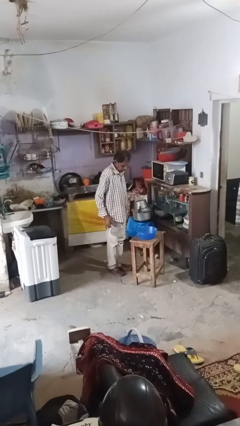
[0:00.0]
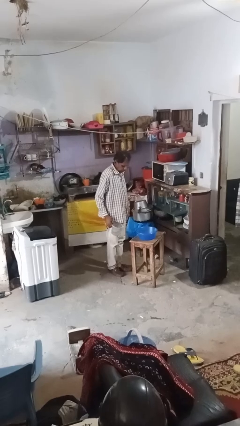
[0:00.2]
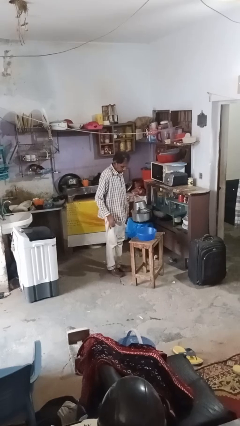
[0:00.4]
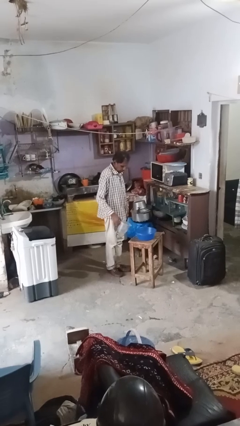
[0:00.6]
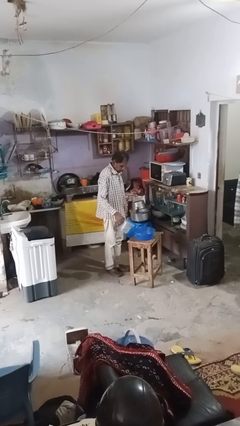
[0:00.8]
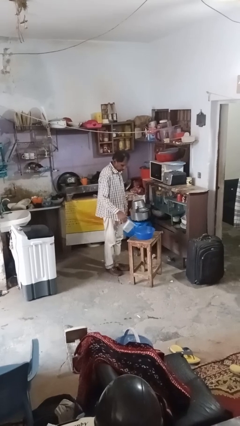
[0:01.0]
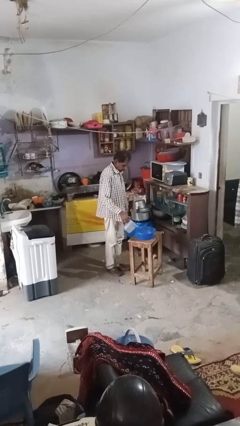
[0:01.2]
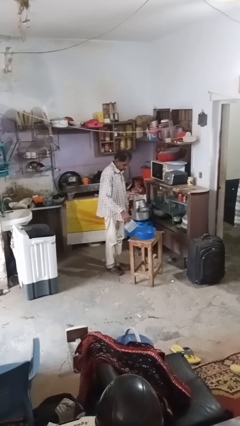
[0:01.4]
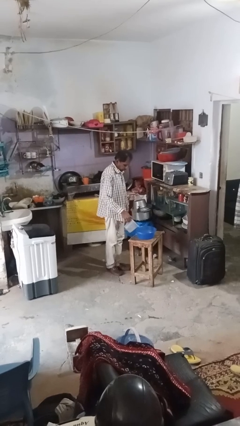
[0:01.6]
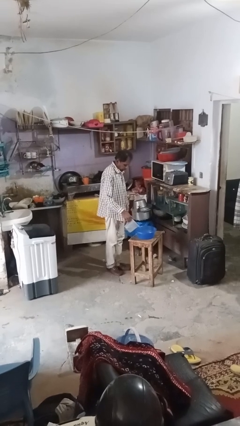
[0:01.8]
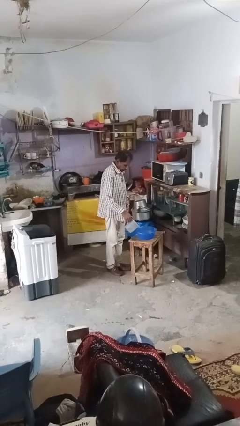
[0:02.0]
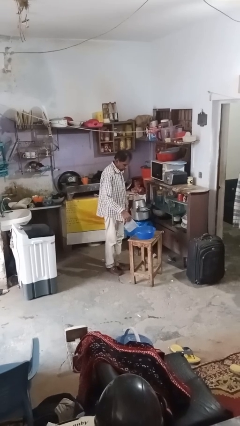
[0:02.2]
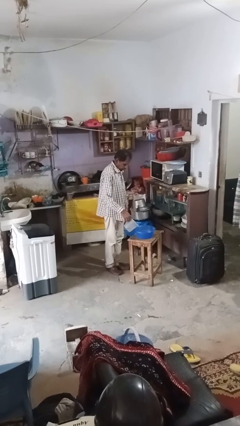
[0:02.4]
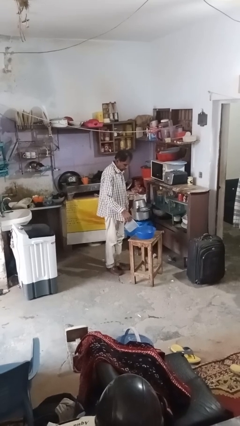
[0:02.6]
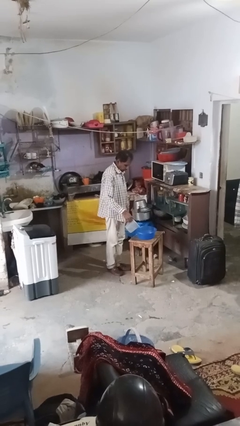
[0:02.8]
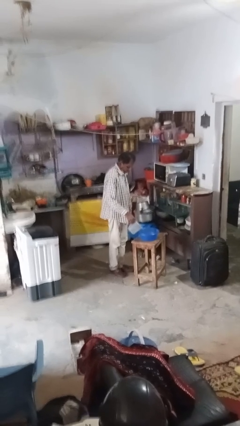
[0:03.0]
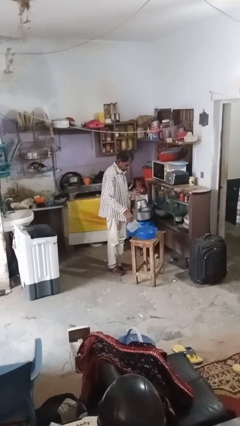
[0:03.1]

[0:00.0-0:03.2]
person pours into bowl

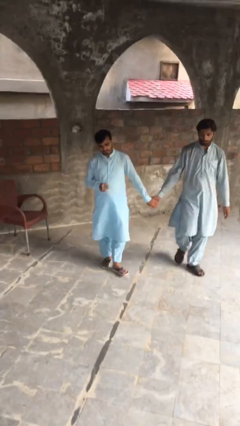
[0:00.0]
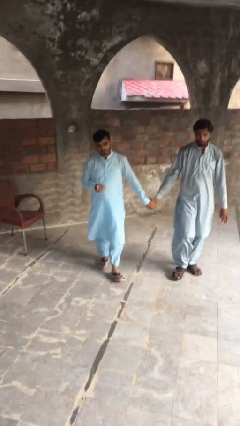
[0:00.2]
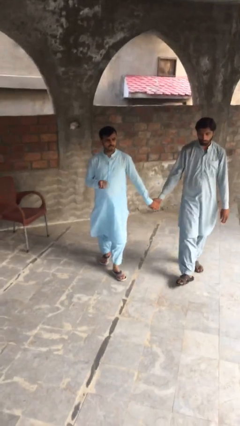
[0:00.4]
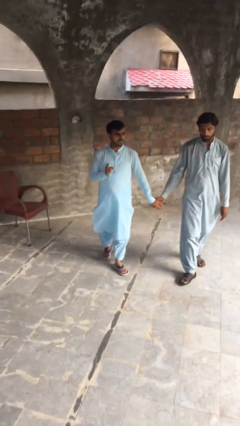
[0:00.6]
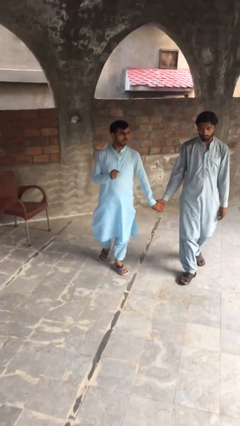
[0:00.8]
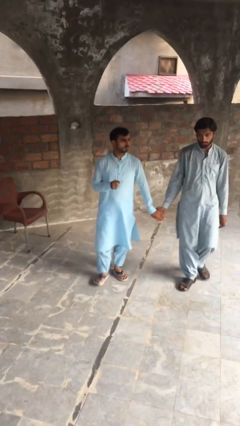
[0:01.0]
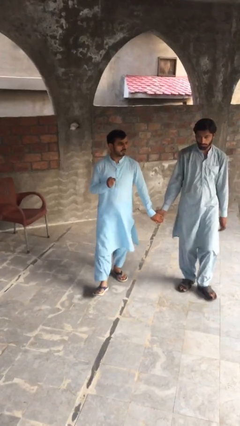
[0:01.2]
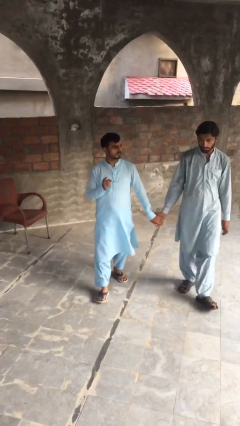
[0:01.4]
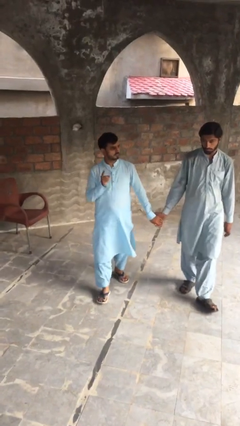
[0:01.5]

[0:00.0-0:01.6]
person holds hand

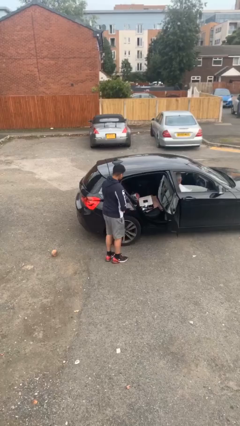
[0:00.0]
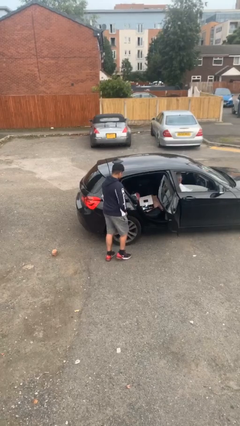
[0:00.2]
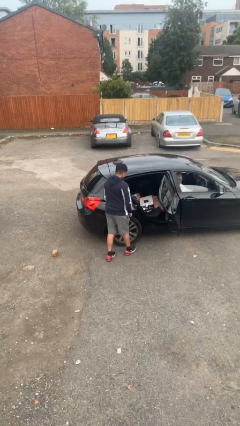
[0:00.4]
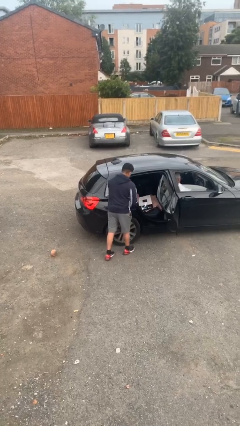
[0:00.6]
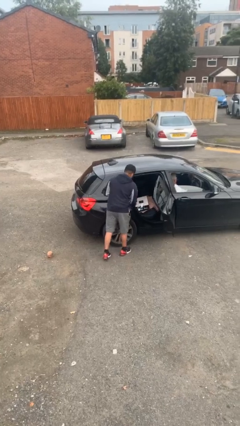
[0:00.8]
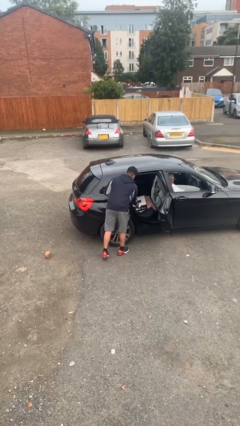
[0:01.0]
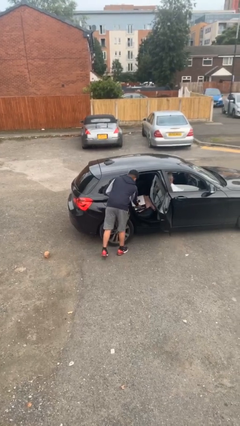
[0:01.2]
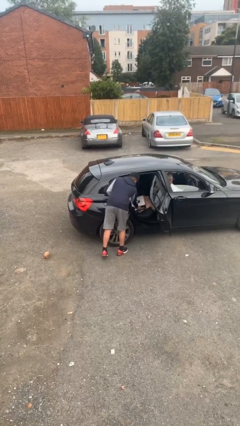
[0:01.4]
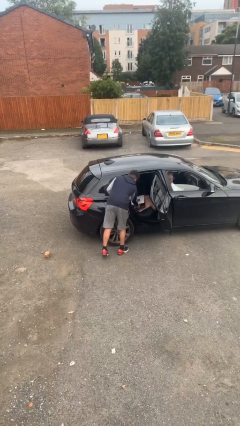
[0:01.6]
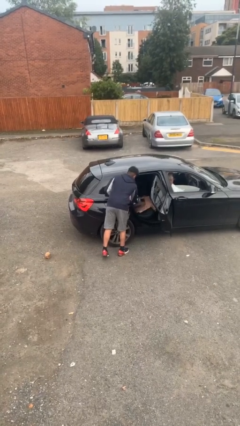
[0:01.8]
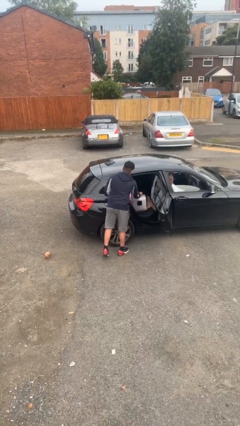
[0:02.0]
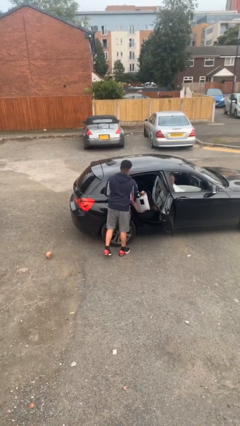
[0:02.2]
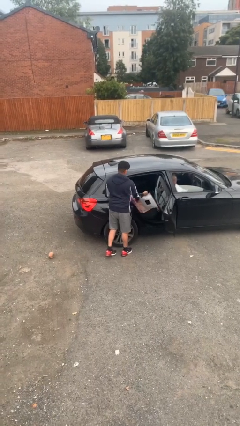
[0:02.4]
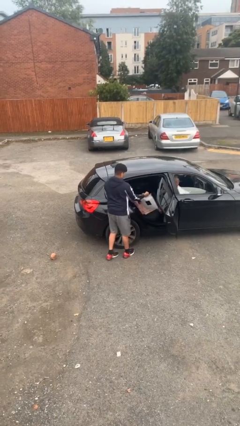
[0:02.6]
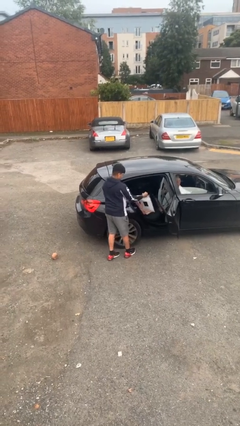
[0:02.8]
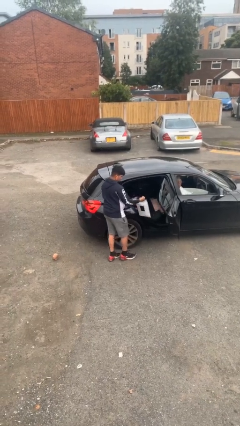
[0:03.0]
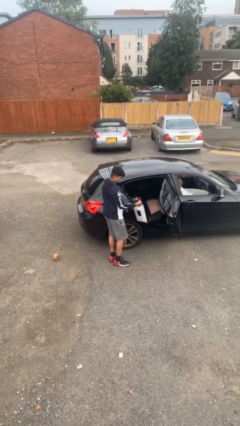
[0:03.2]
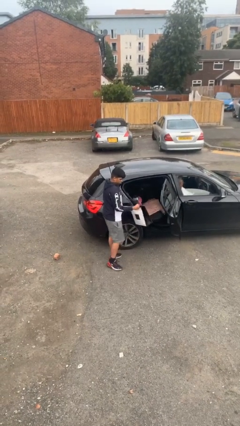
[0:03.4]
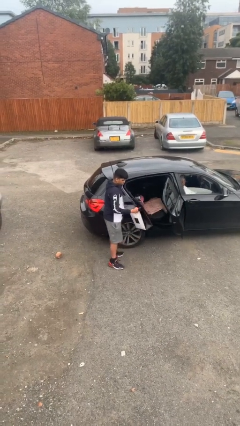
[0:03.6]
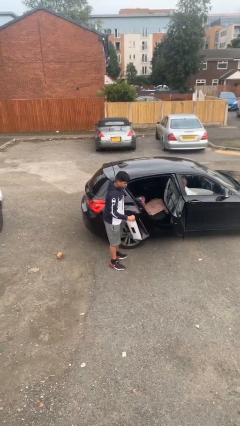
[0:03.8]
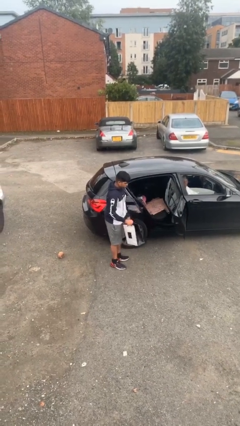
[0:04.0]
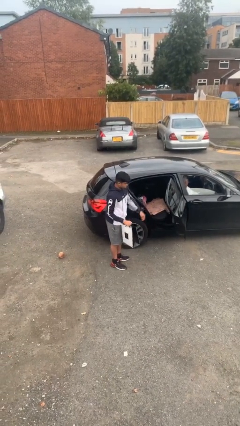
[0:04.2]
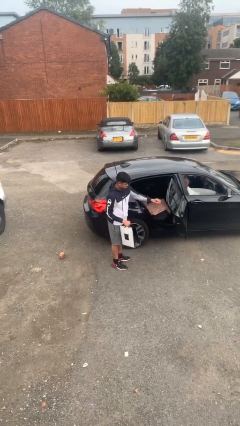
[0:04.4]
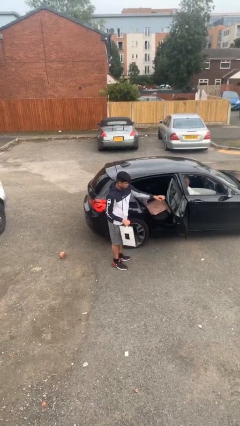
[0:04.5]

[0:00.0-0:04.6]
person unloads car

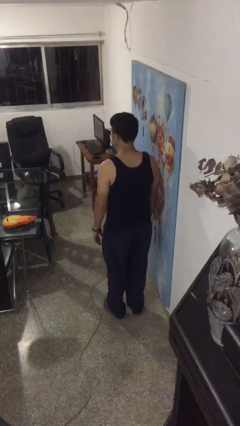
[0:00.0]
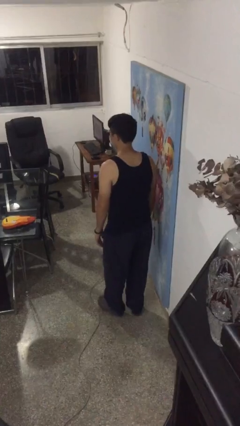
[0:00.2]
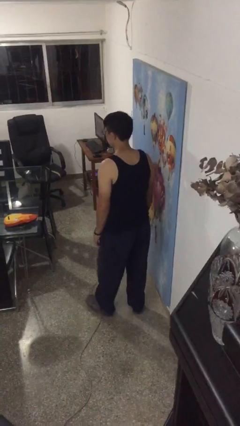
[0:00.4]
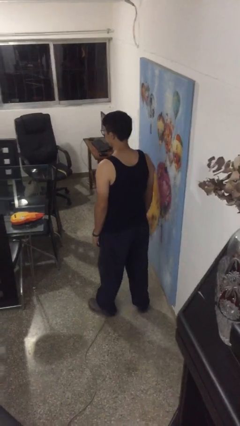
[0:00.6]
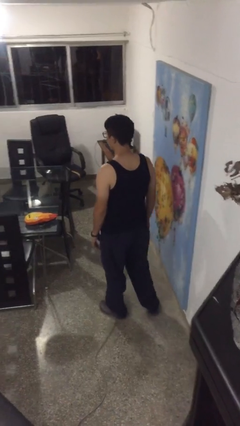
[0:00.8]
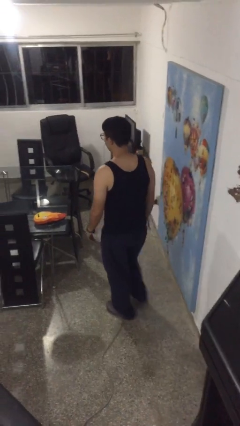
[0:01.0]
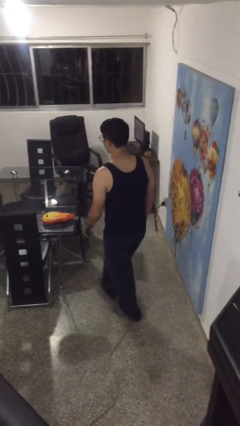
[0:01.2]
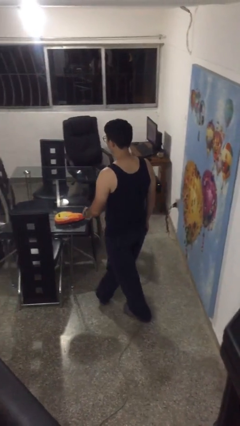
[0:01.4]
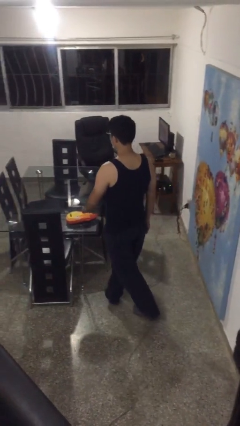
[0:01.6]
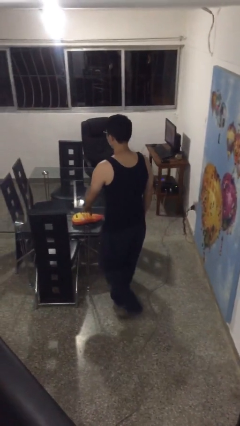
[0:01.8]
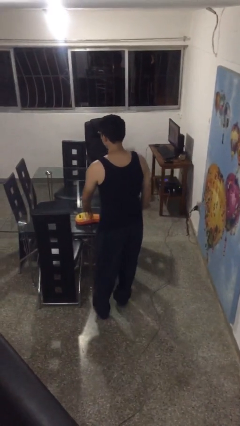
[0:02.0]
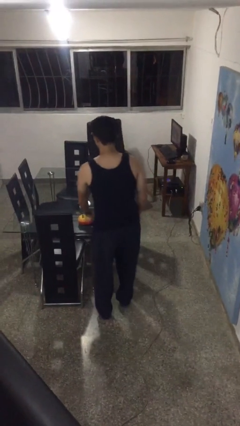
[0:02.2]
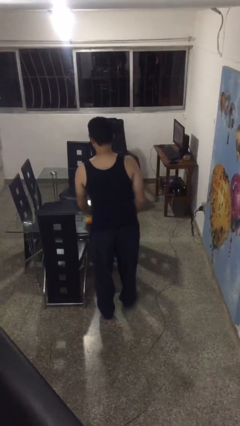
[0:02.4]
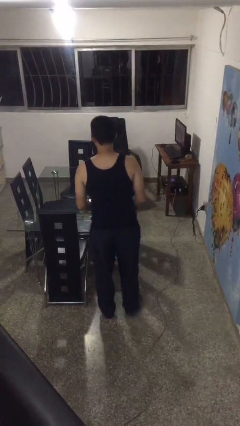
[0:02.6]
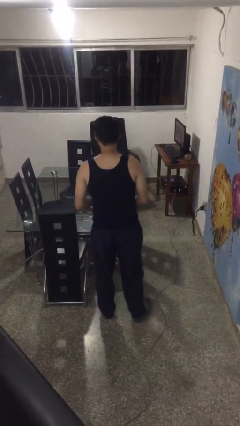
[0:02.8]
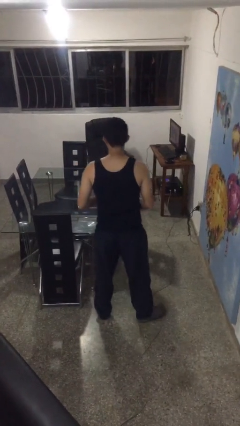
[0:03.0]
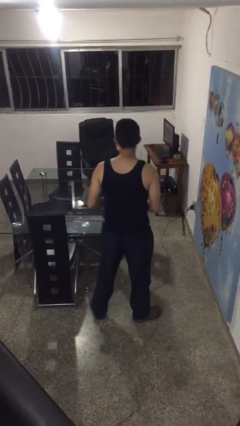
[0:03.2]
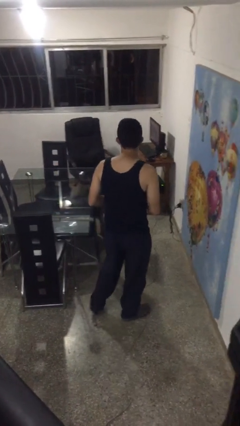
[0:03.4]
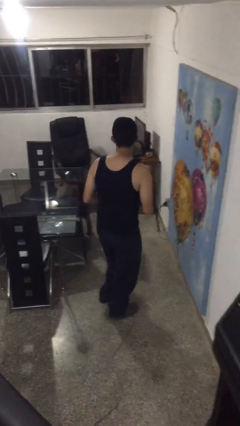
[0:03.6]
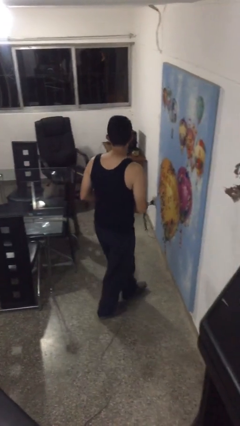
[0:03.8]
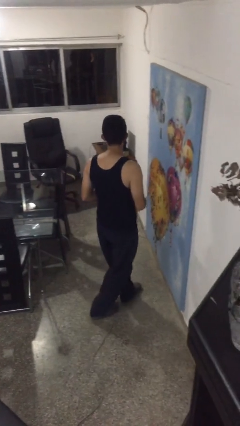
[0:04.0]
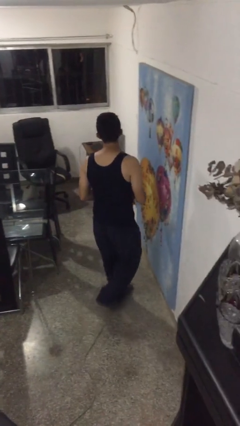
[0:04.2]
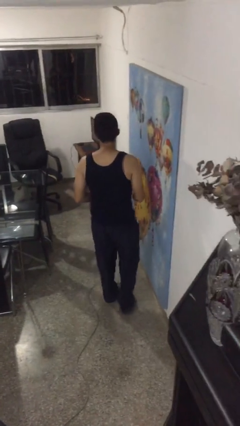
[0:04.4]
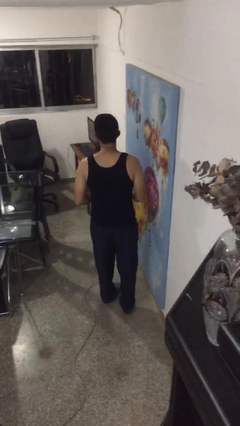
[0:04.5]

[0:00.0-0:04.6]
person picks up object from table

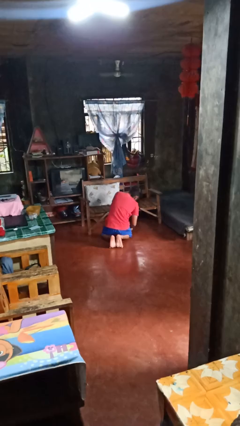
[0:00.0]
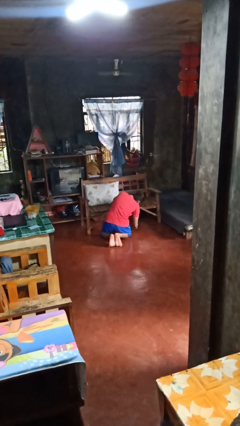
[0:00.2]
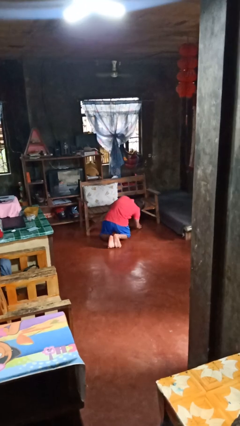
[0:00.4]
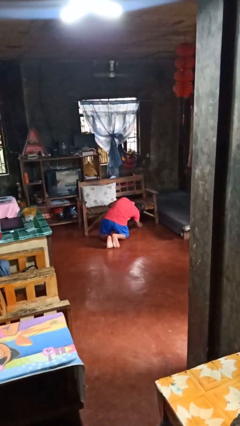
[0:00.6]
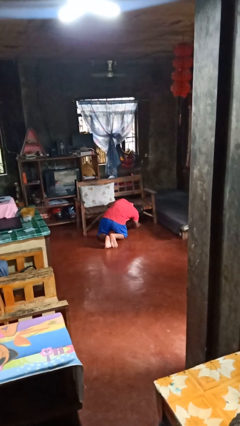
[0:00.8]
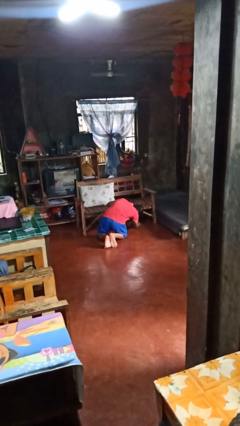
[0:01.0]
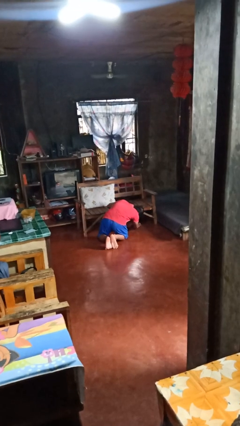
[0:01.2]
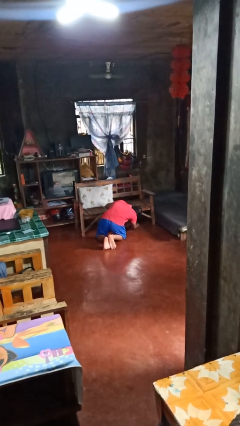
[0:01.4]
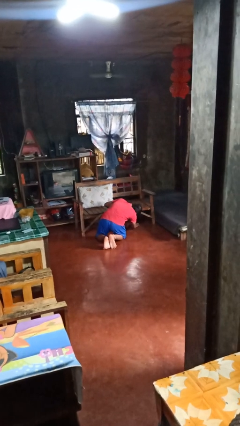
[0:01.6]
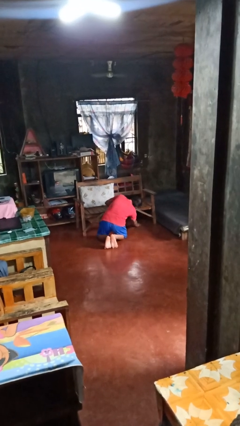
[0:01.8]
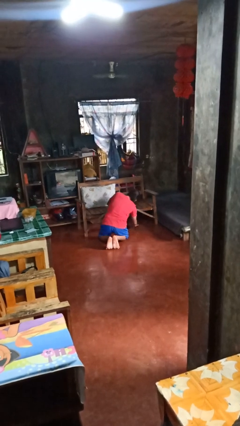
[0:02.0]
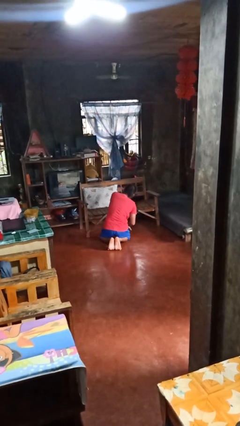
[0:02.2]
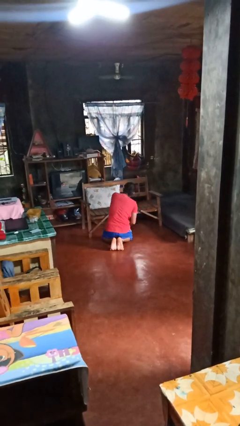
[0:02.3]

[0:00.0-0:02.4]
person searches under couch

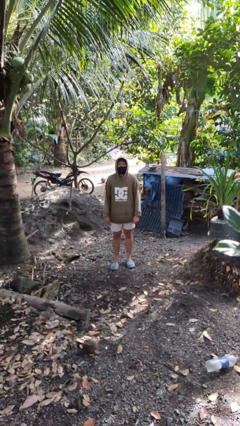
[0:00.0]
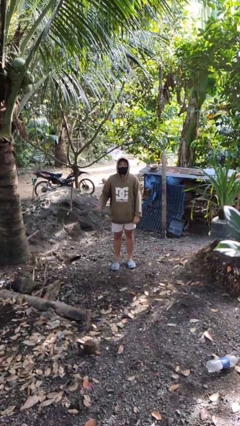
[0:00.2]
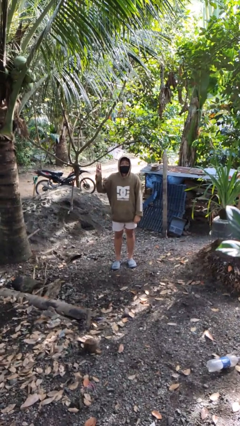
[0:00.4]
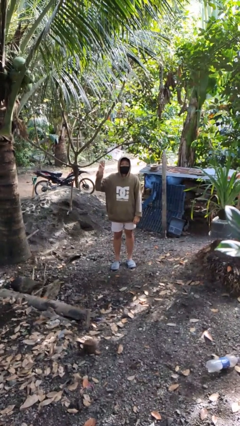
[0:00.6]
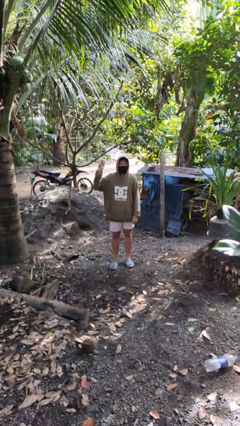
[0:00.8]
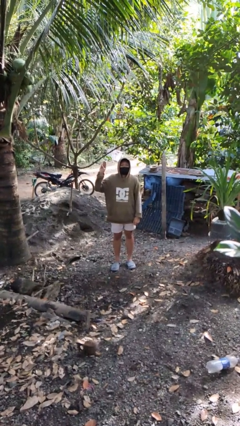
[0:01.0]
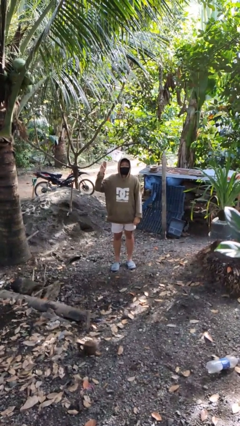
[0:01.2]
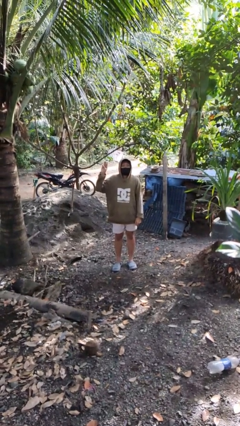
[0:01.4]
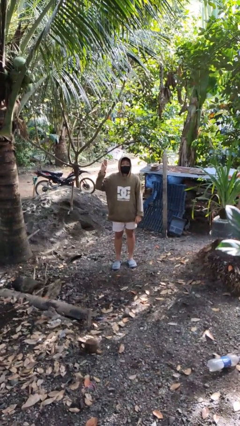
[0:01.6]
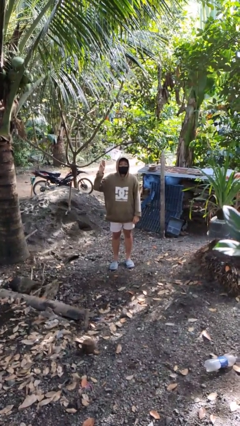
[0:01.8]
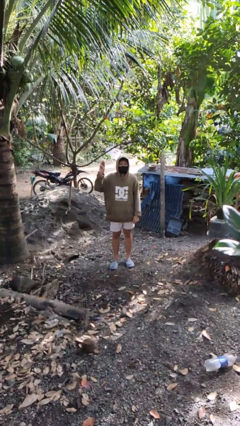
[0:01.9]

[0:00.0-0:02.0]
person gestures number three
